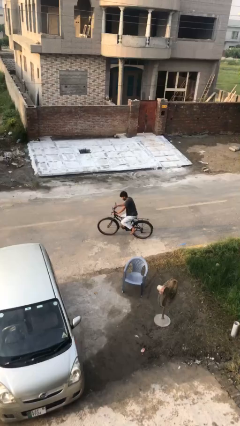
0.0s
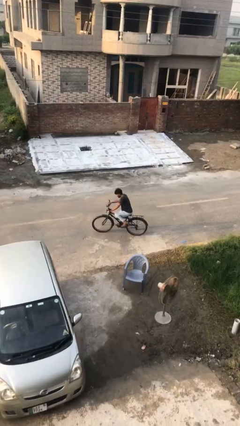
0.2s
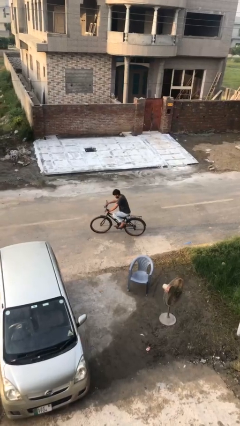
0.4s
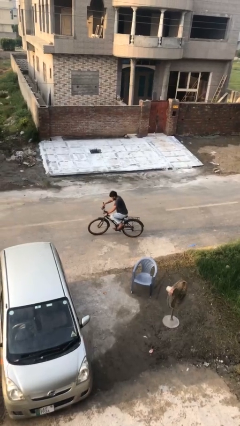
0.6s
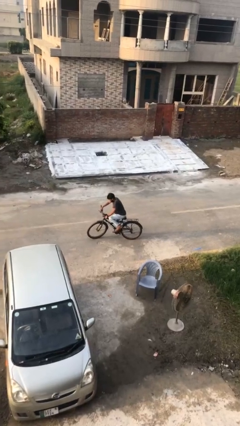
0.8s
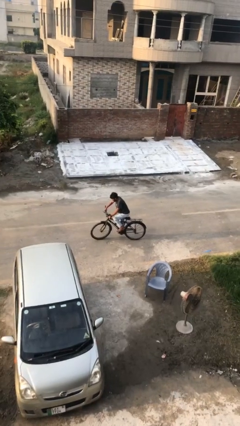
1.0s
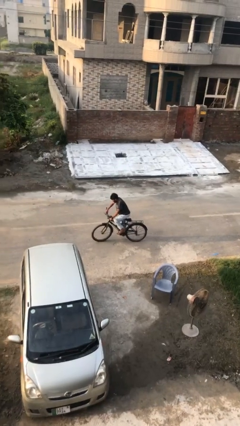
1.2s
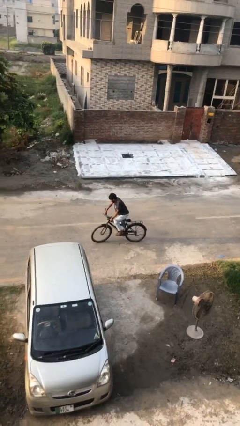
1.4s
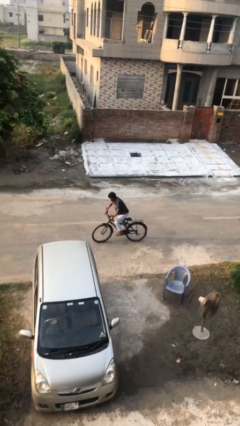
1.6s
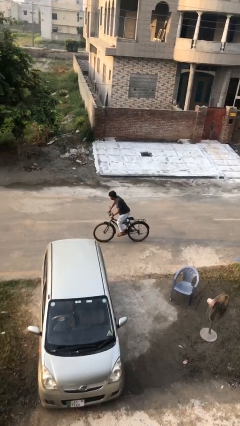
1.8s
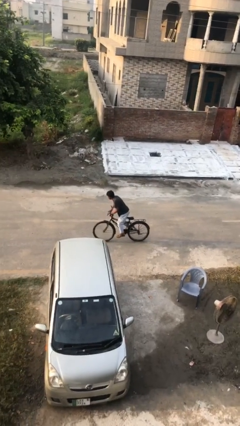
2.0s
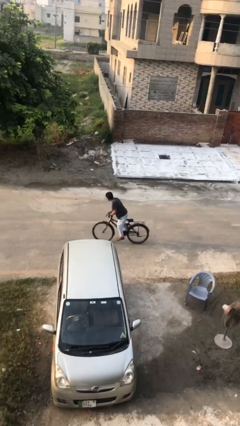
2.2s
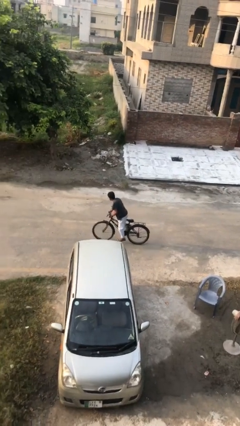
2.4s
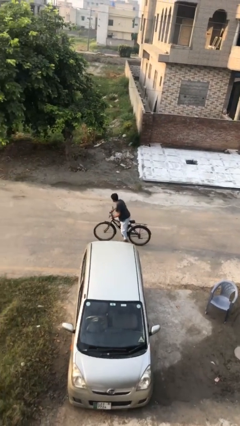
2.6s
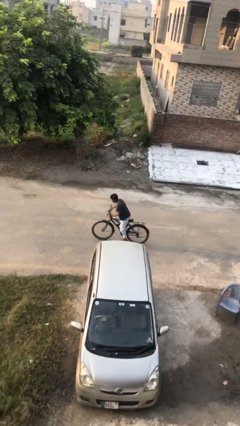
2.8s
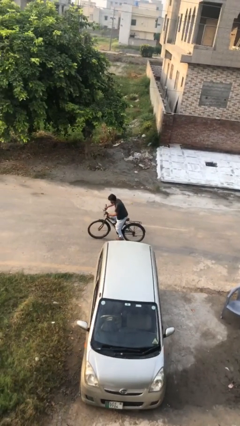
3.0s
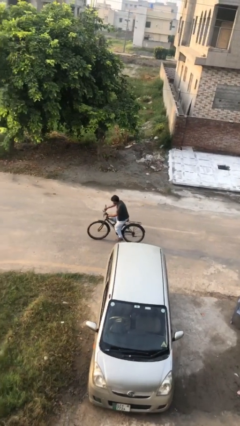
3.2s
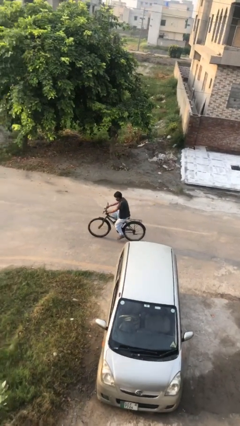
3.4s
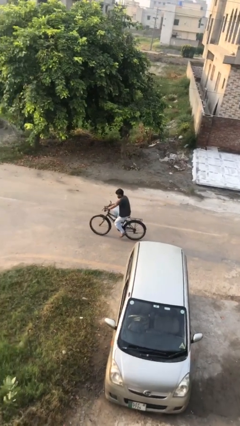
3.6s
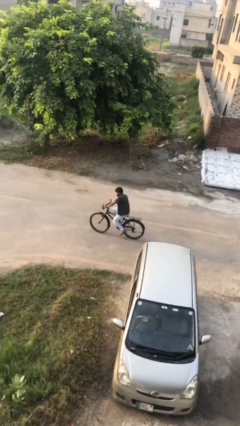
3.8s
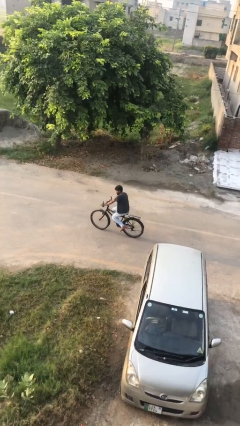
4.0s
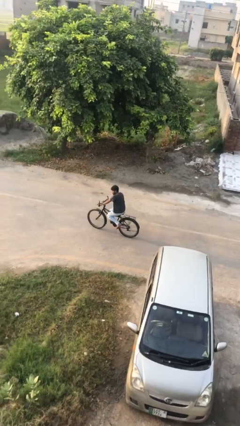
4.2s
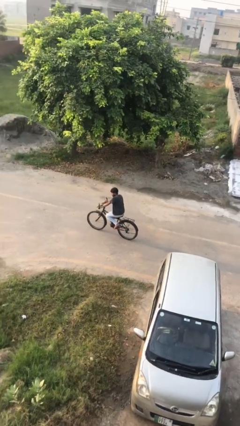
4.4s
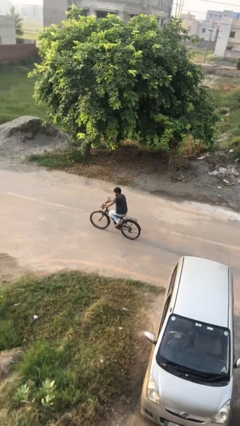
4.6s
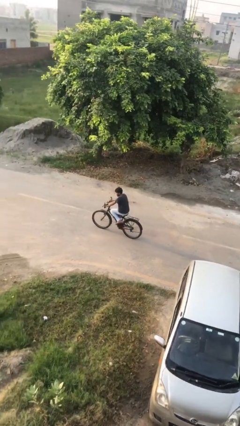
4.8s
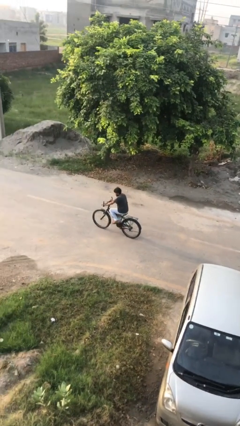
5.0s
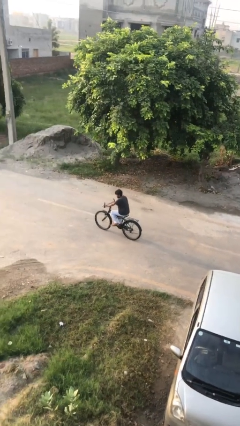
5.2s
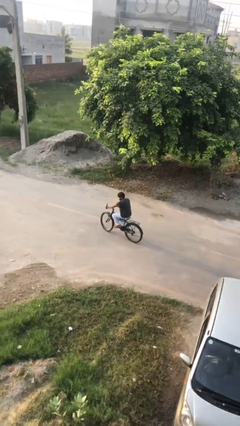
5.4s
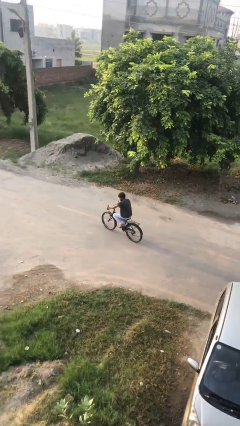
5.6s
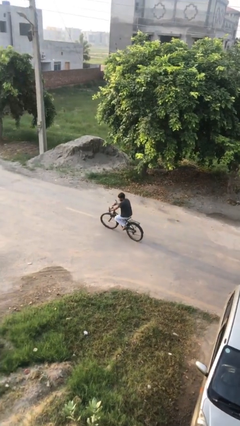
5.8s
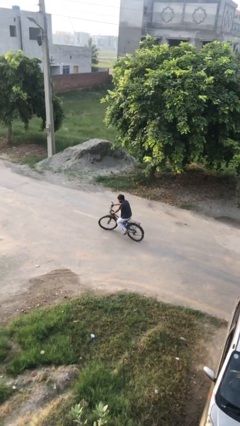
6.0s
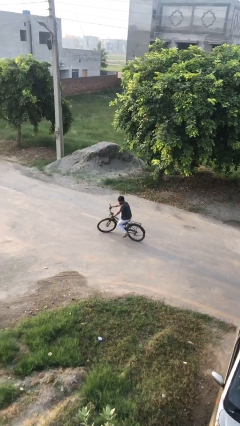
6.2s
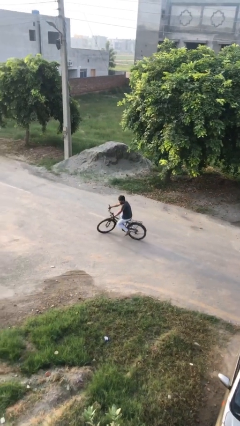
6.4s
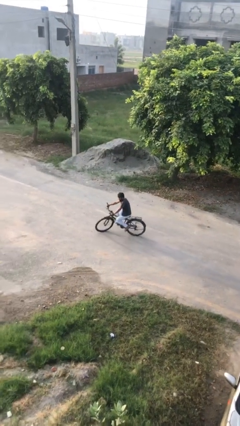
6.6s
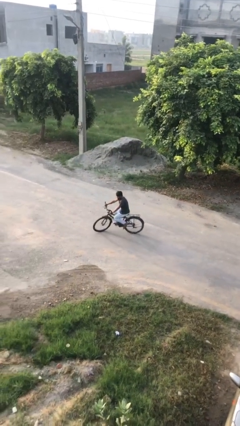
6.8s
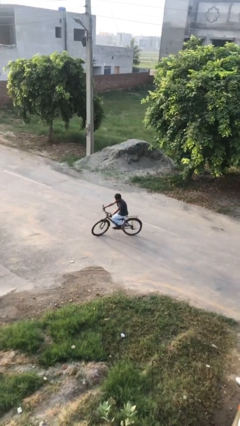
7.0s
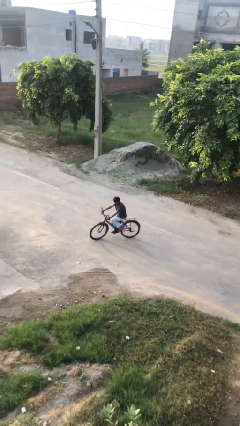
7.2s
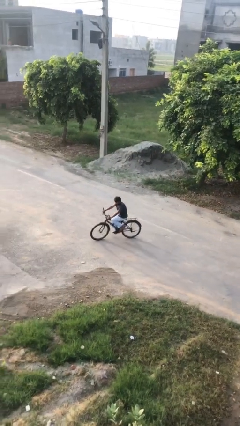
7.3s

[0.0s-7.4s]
person rides bicycle

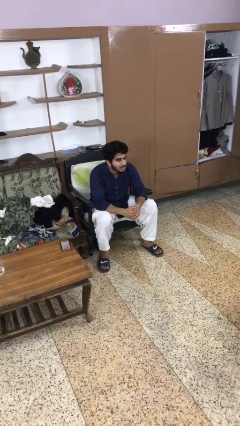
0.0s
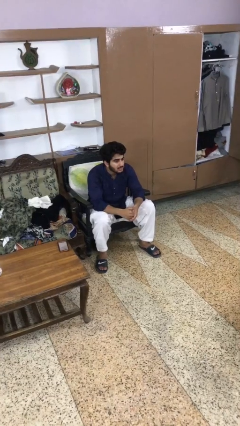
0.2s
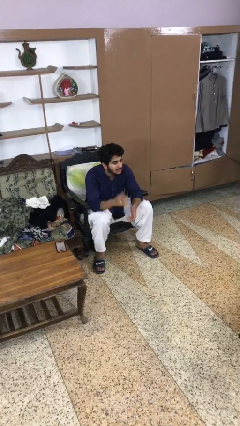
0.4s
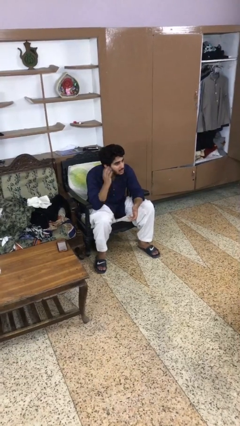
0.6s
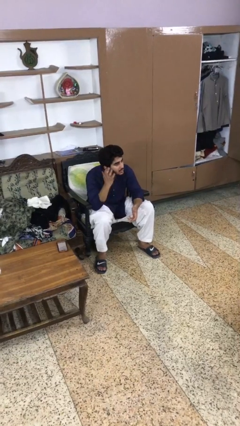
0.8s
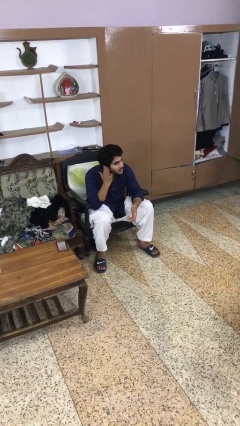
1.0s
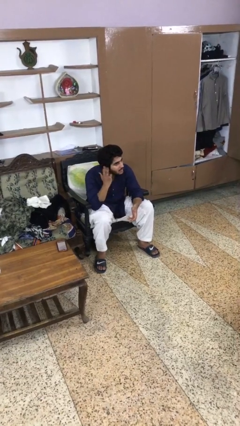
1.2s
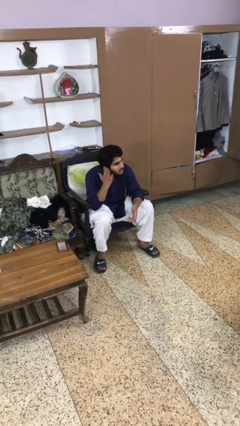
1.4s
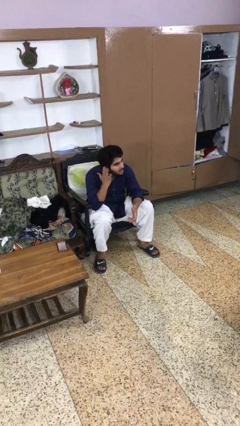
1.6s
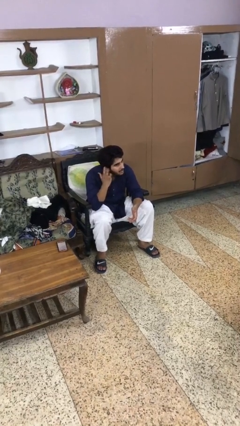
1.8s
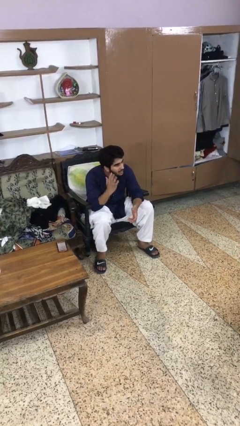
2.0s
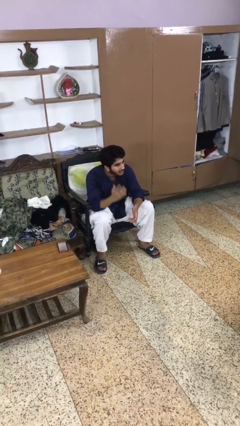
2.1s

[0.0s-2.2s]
person puts fingers in ear

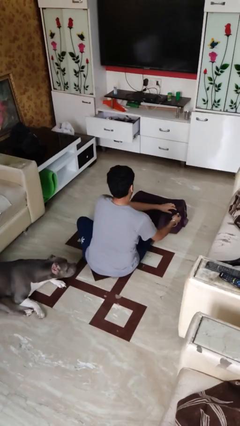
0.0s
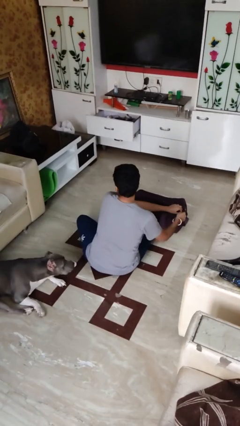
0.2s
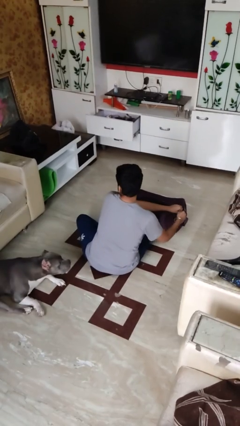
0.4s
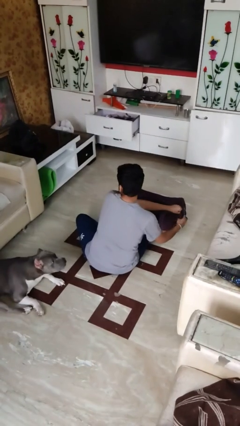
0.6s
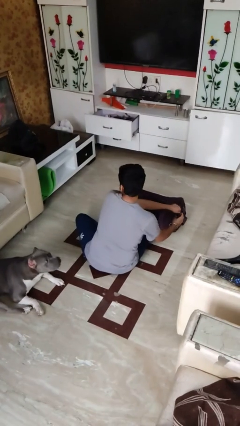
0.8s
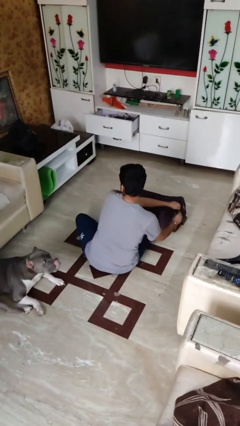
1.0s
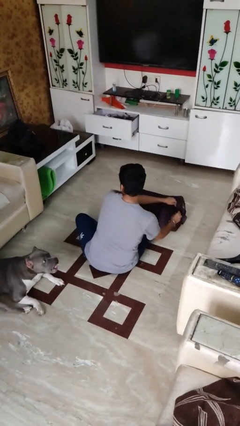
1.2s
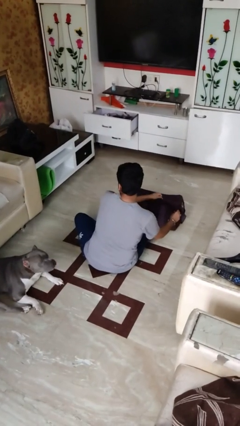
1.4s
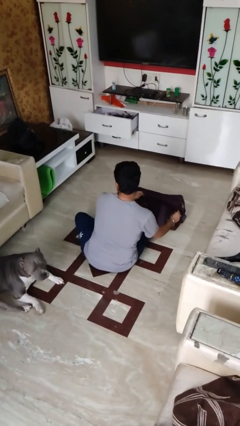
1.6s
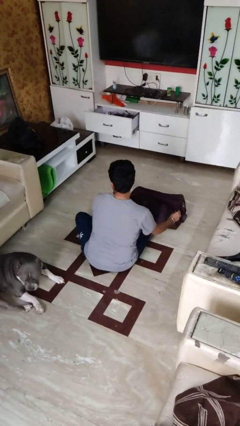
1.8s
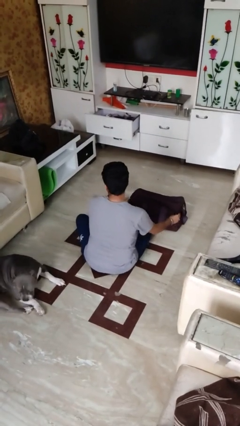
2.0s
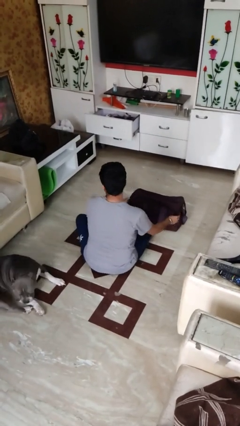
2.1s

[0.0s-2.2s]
person closes suitcase

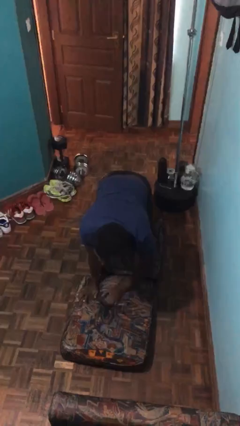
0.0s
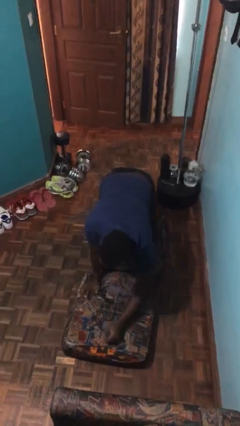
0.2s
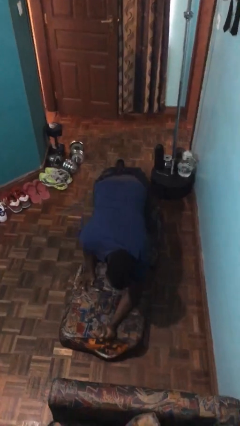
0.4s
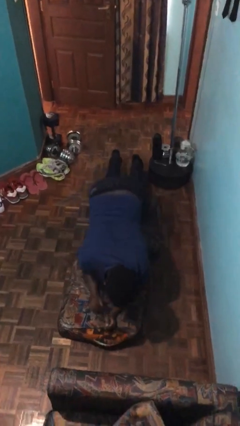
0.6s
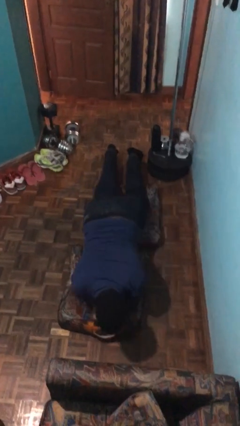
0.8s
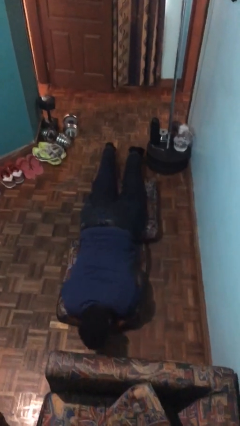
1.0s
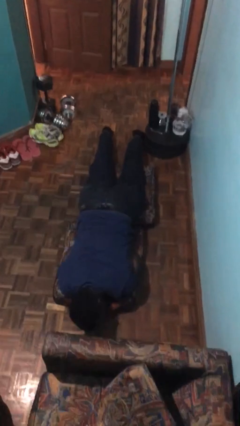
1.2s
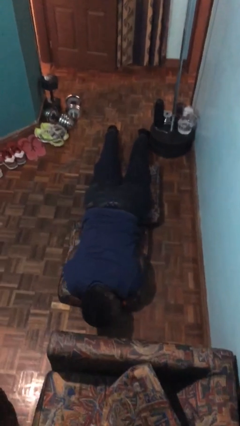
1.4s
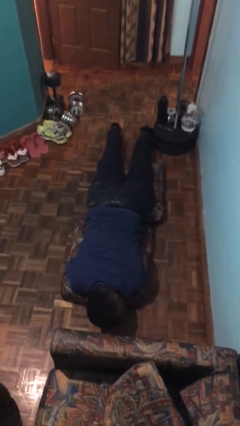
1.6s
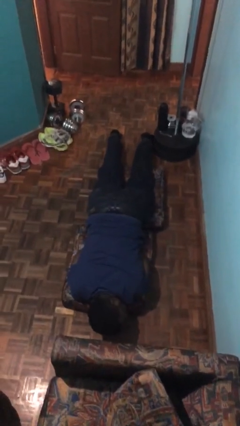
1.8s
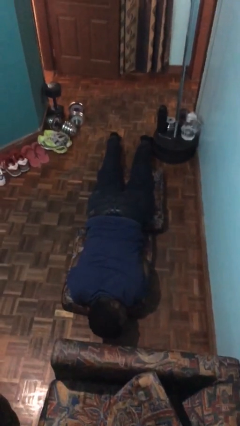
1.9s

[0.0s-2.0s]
person lies down on floor

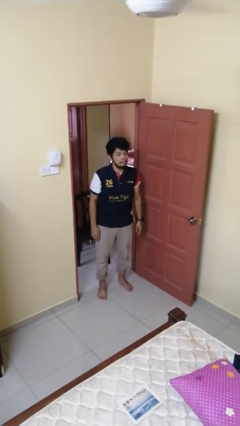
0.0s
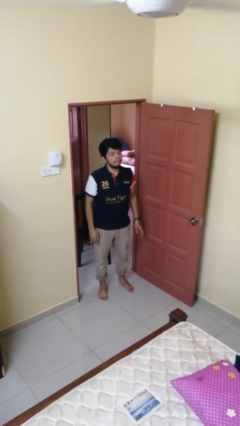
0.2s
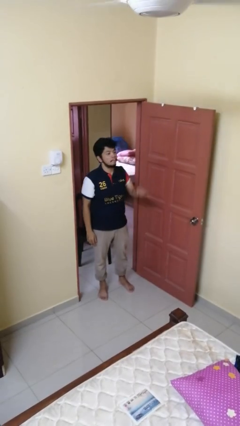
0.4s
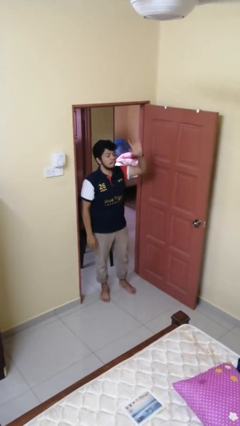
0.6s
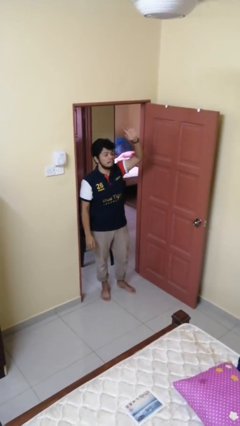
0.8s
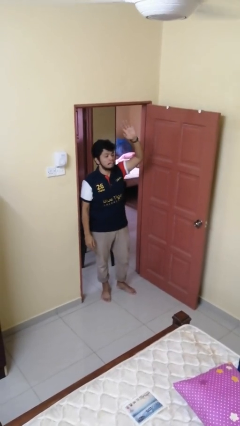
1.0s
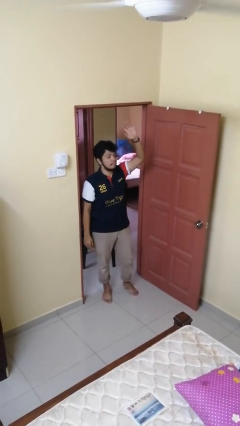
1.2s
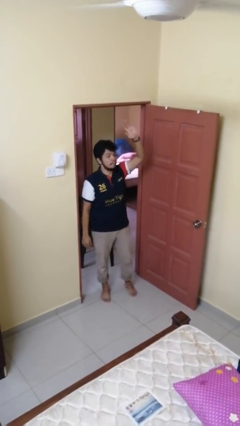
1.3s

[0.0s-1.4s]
person gestures raise hand

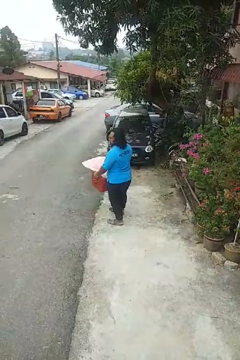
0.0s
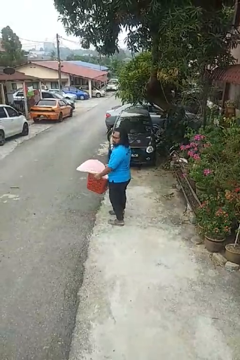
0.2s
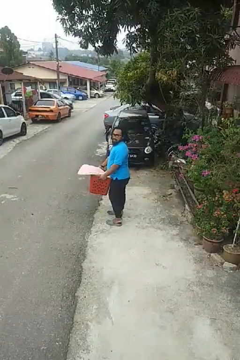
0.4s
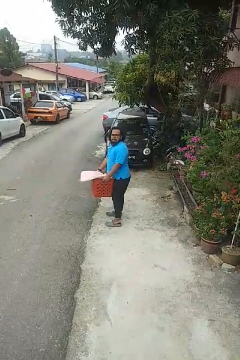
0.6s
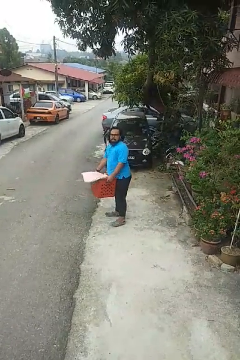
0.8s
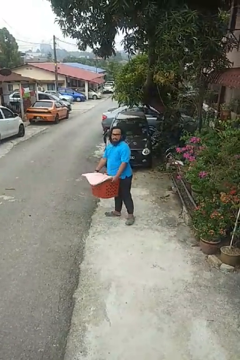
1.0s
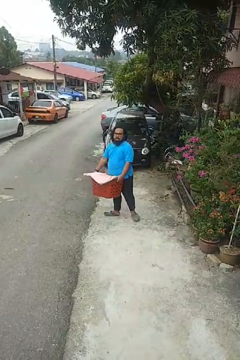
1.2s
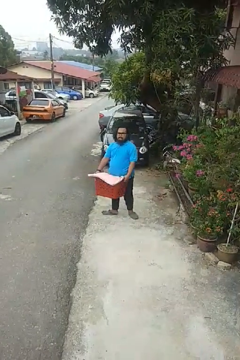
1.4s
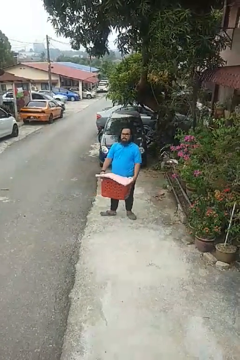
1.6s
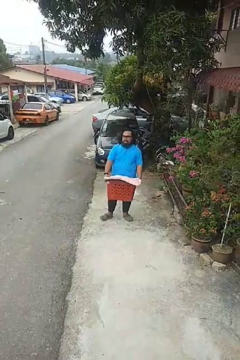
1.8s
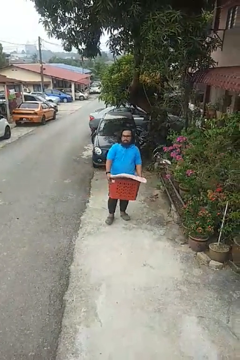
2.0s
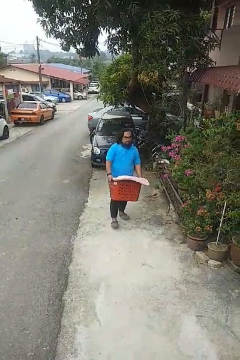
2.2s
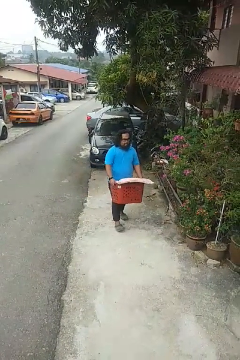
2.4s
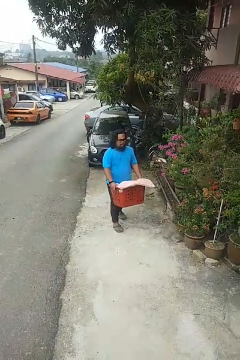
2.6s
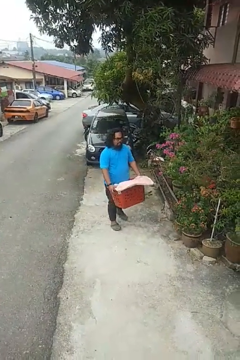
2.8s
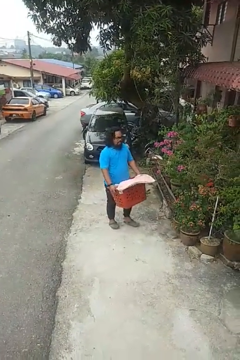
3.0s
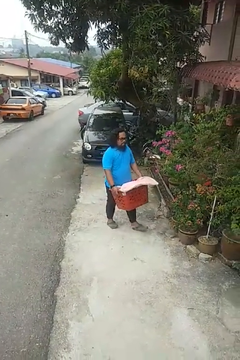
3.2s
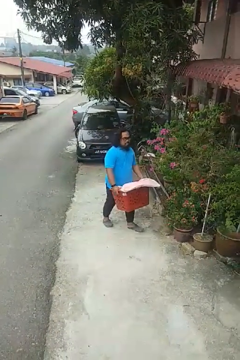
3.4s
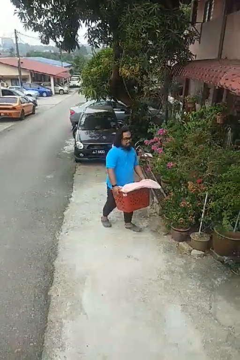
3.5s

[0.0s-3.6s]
person carries laundry basket
